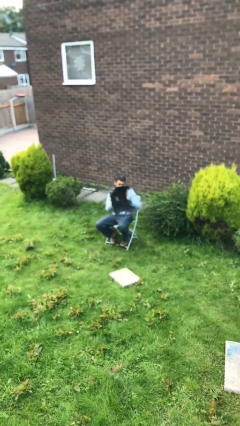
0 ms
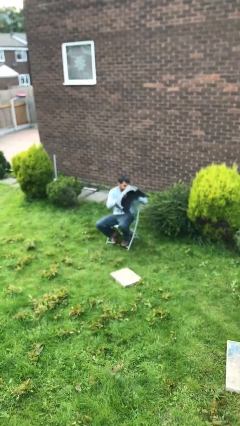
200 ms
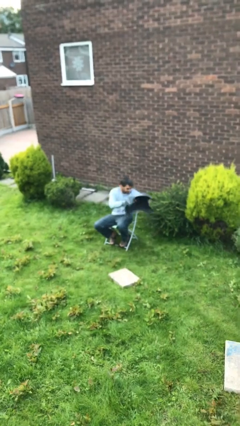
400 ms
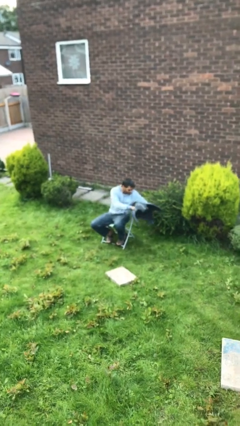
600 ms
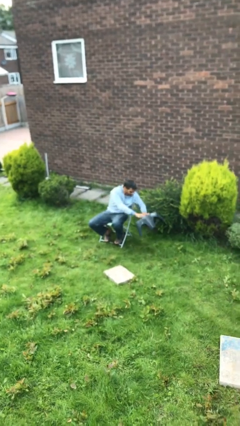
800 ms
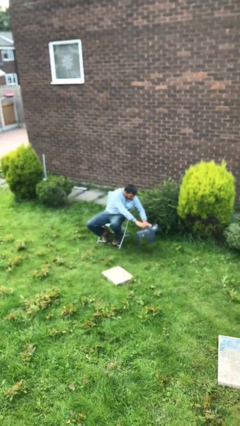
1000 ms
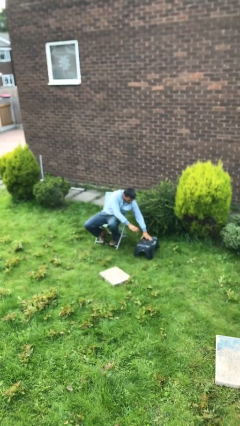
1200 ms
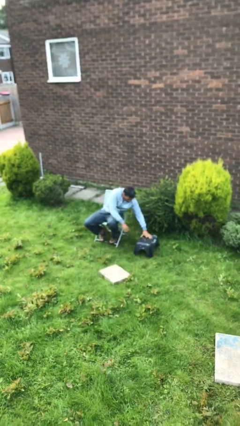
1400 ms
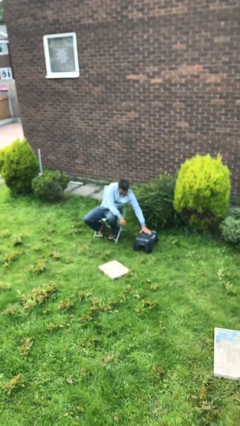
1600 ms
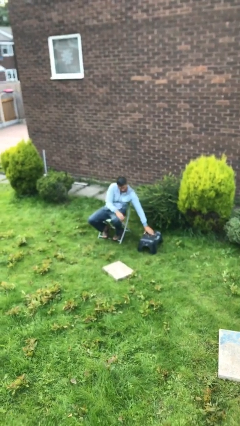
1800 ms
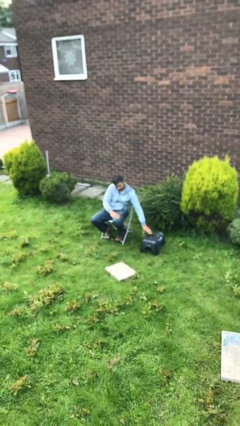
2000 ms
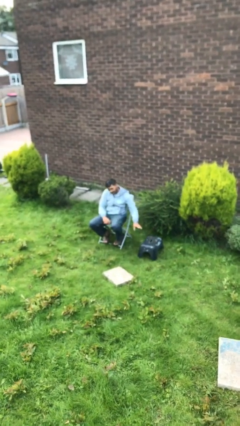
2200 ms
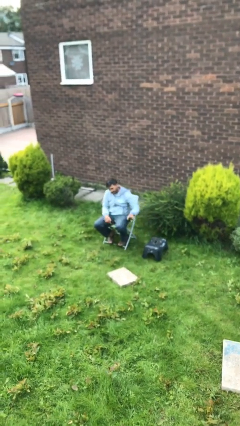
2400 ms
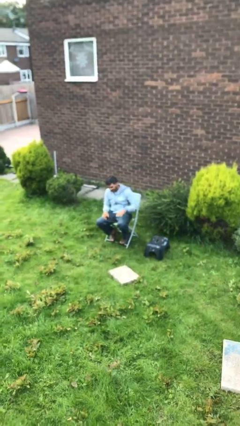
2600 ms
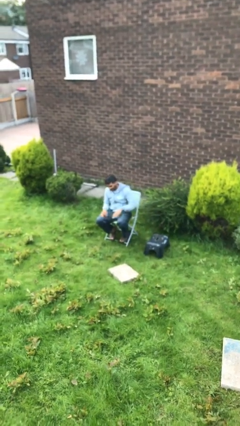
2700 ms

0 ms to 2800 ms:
person puts down object on floor

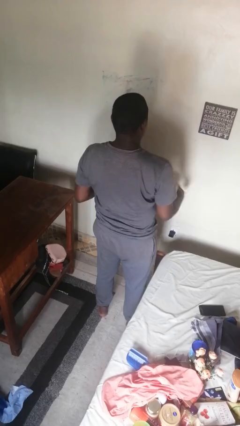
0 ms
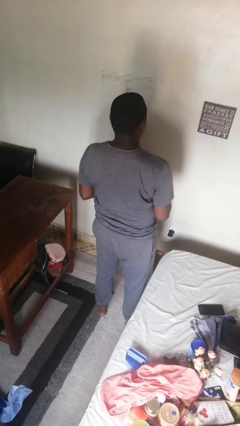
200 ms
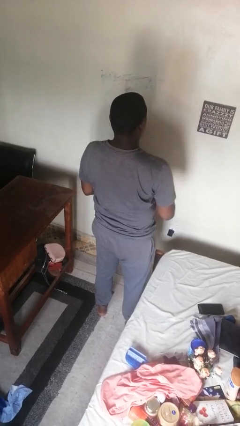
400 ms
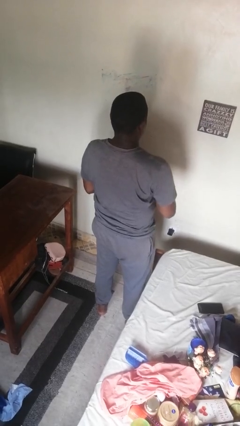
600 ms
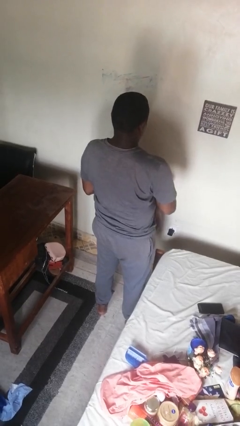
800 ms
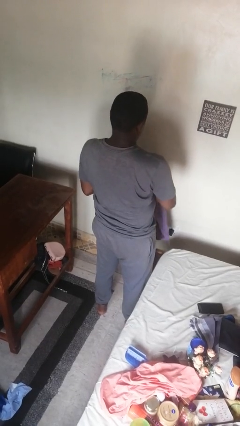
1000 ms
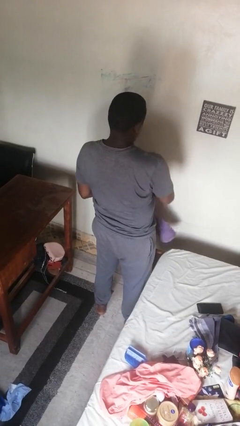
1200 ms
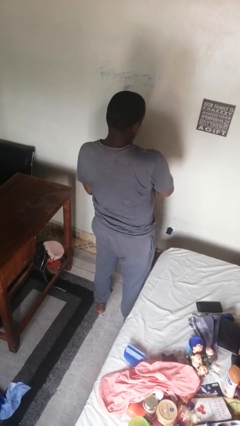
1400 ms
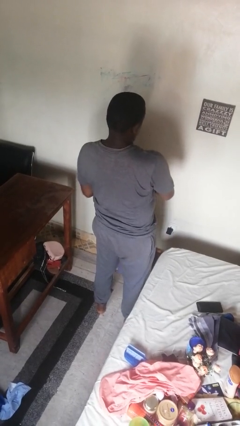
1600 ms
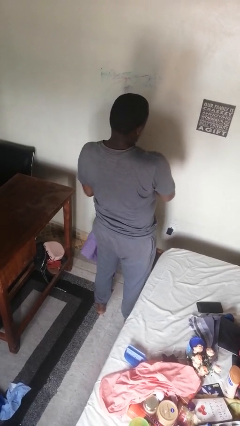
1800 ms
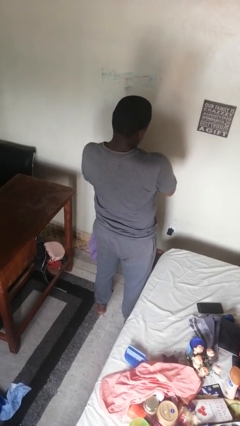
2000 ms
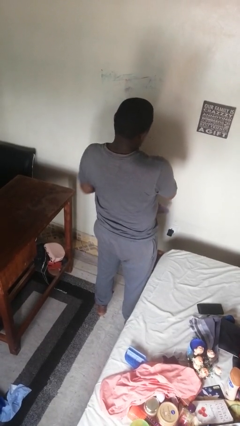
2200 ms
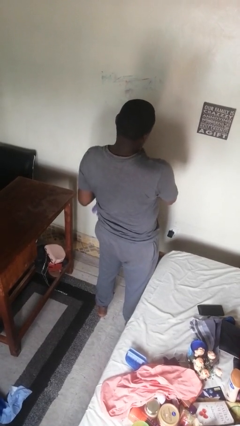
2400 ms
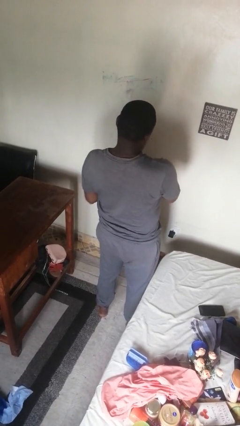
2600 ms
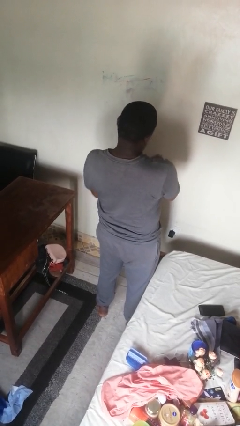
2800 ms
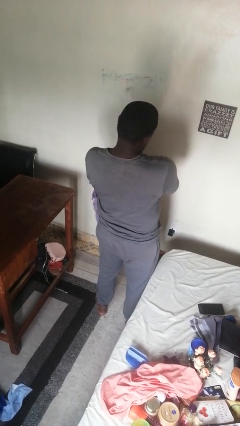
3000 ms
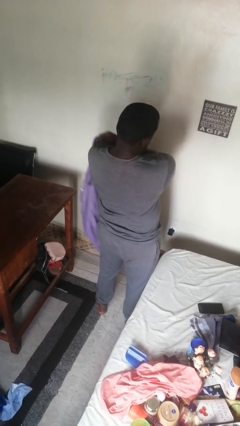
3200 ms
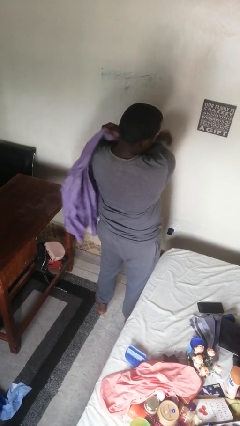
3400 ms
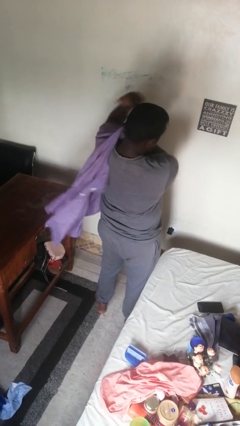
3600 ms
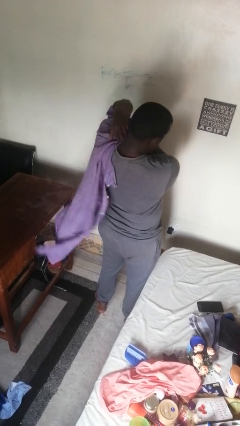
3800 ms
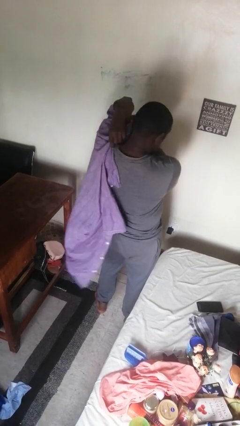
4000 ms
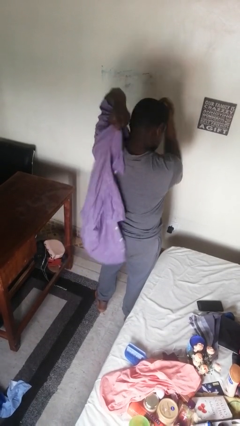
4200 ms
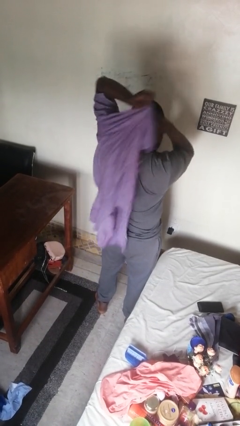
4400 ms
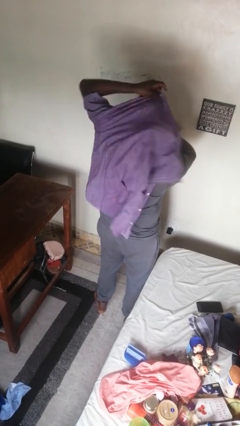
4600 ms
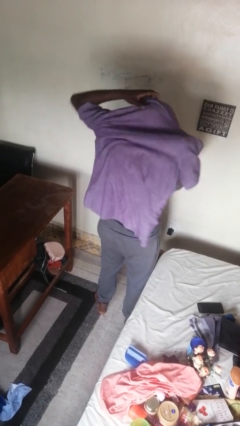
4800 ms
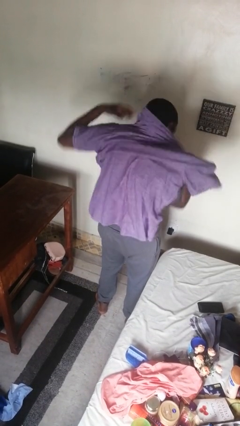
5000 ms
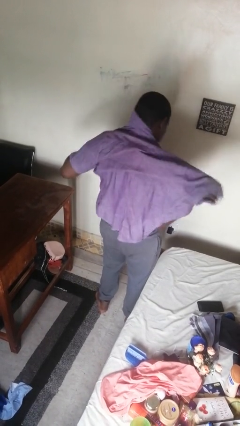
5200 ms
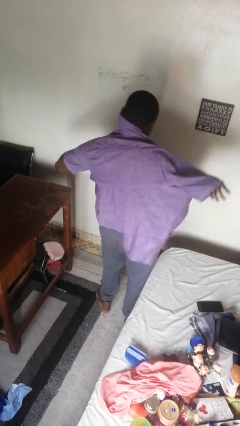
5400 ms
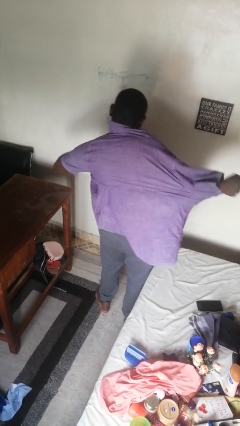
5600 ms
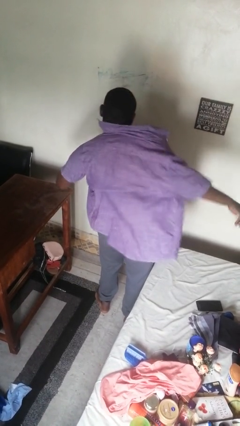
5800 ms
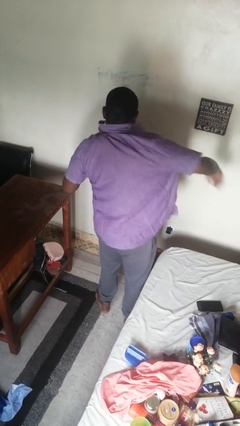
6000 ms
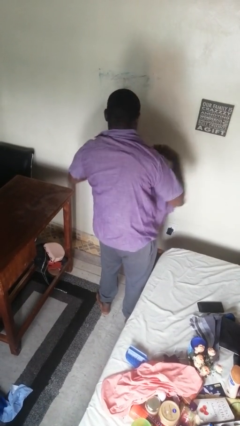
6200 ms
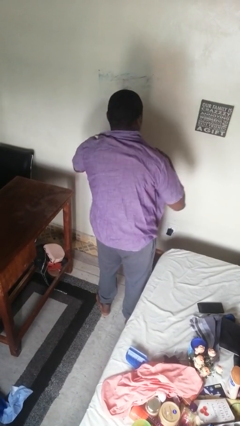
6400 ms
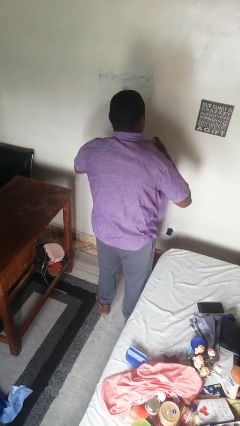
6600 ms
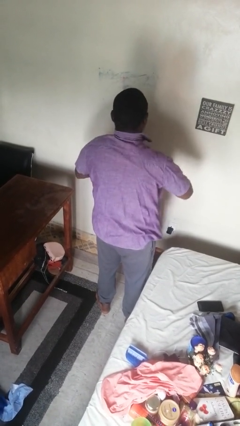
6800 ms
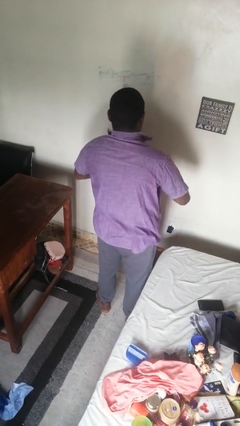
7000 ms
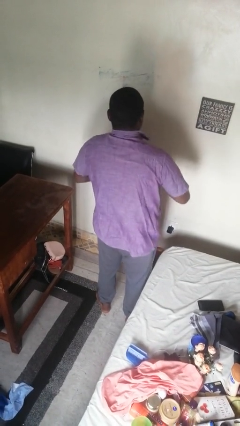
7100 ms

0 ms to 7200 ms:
person puts on shirt

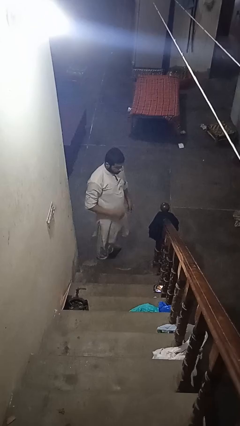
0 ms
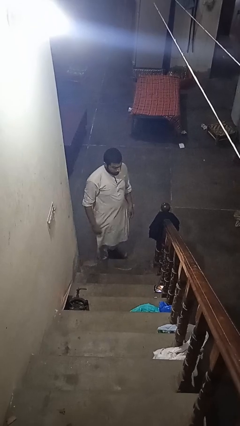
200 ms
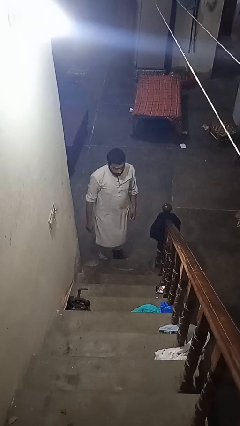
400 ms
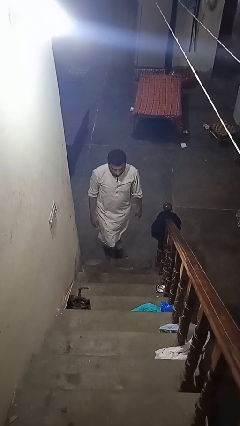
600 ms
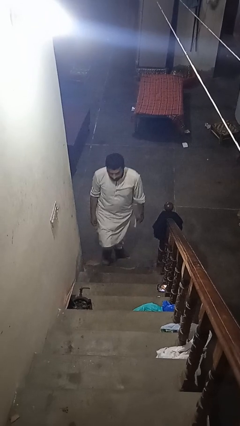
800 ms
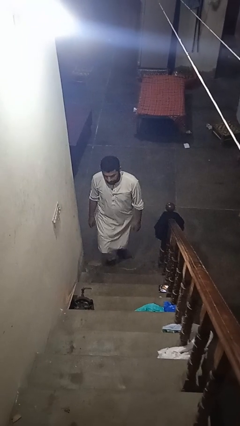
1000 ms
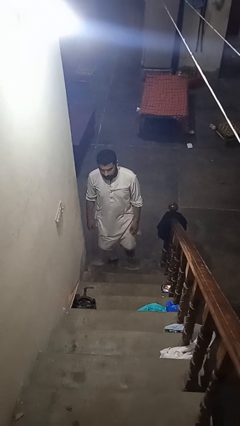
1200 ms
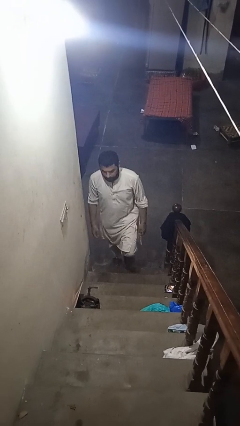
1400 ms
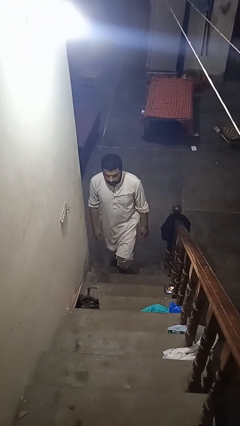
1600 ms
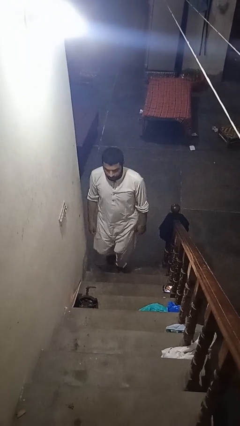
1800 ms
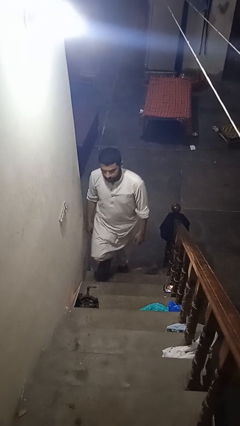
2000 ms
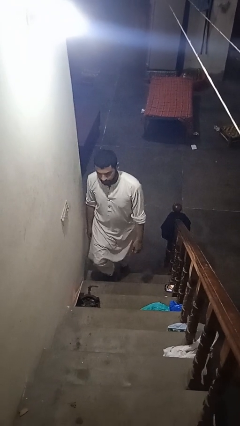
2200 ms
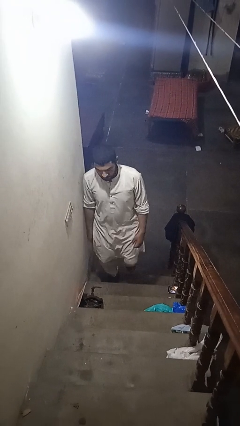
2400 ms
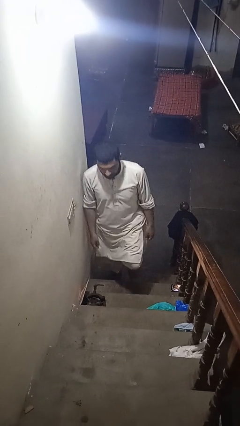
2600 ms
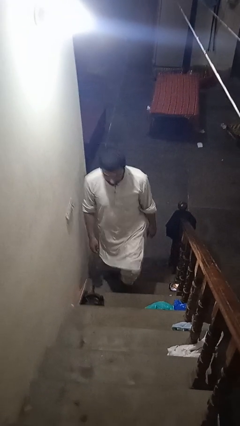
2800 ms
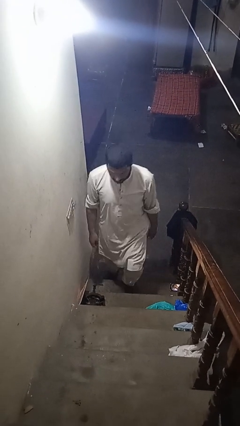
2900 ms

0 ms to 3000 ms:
person climbs up stairs

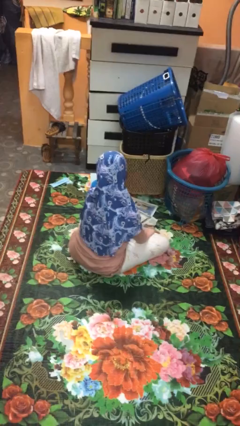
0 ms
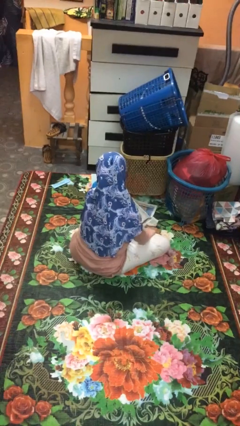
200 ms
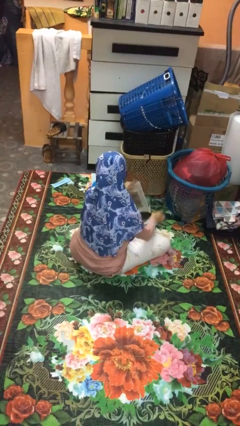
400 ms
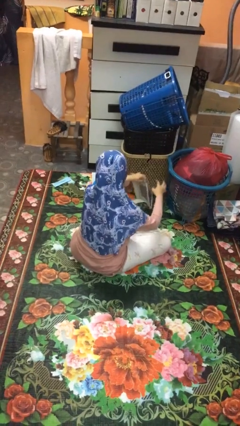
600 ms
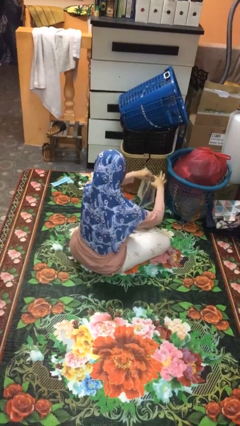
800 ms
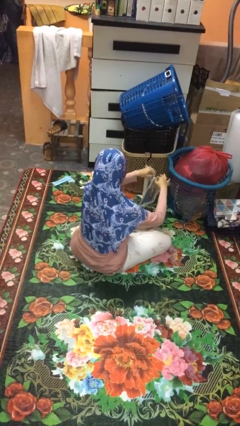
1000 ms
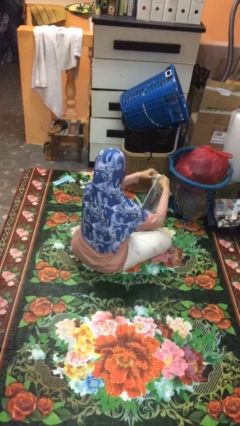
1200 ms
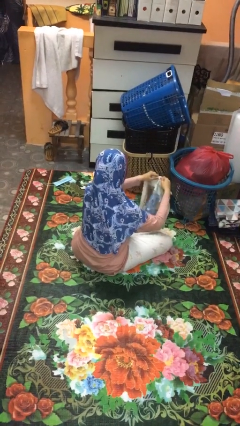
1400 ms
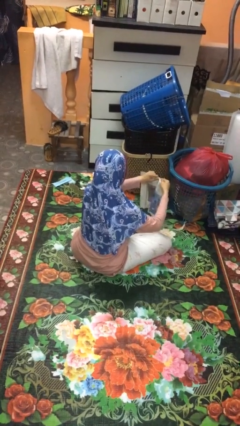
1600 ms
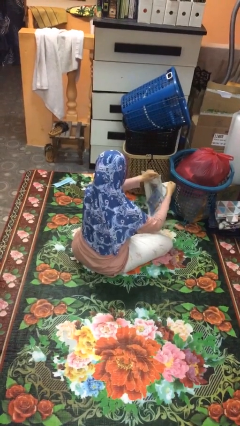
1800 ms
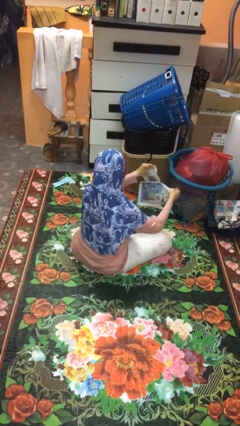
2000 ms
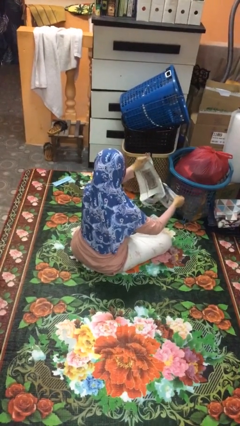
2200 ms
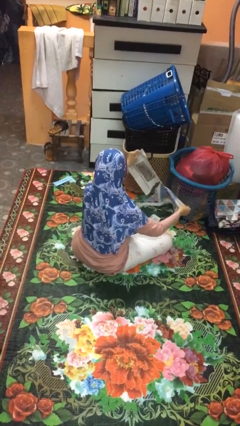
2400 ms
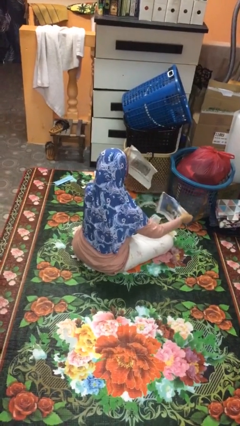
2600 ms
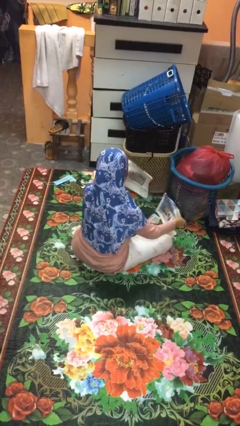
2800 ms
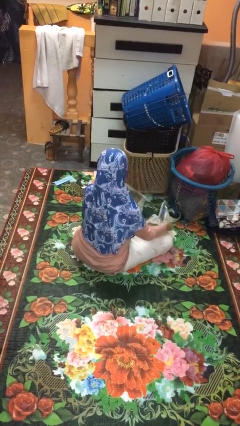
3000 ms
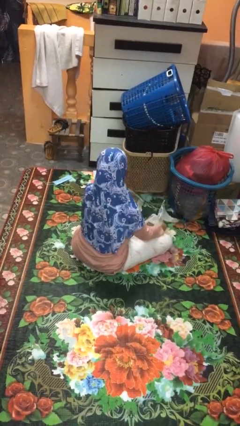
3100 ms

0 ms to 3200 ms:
person tears paper

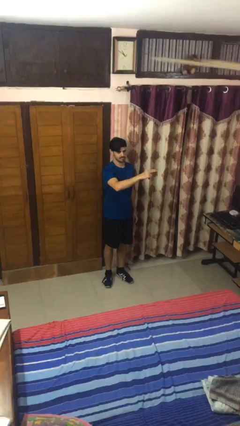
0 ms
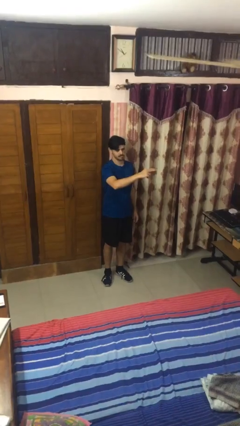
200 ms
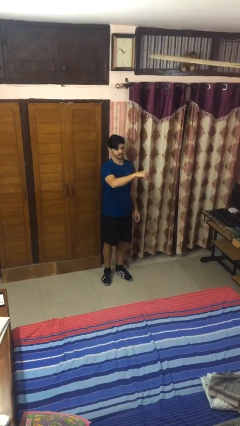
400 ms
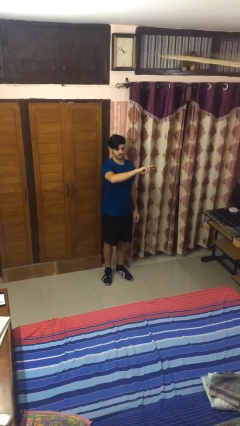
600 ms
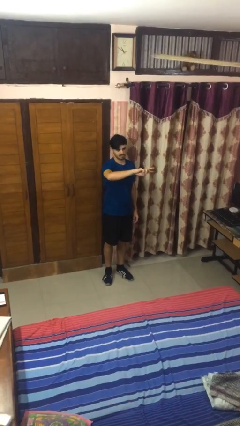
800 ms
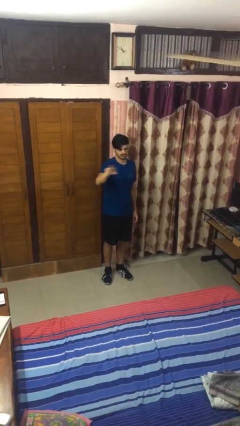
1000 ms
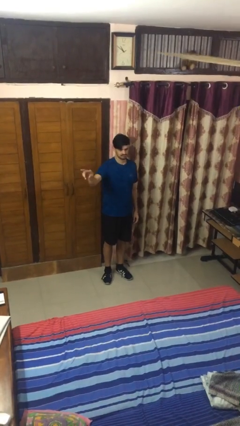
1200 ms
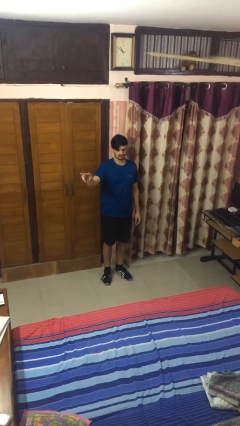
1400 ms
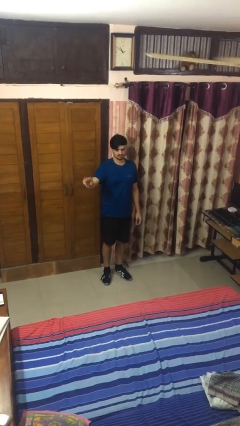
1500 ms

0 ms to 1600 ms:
person gestures swipe right

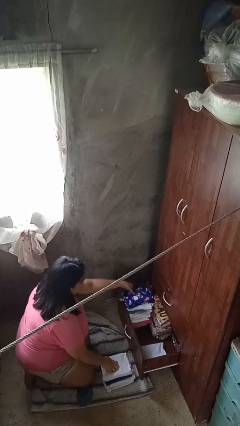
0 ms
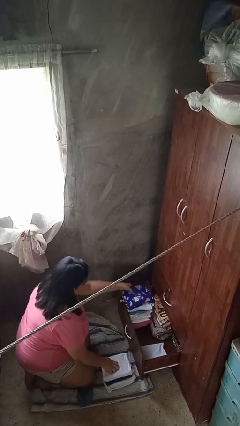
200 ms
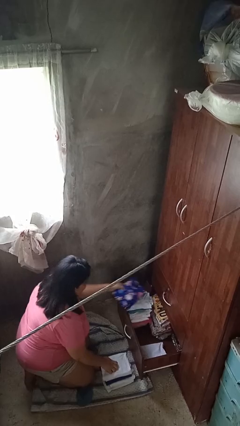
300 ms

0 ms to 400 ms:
person takes clothes from dresser
